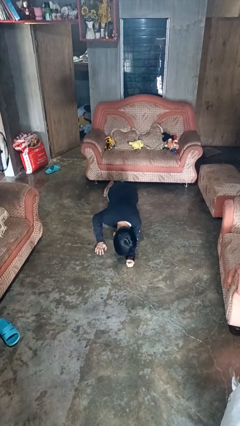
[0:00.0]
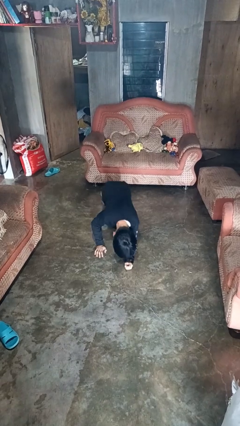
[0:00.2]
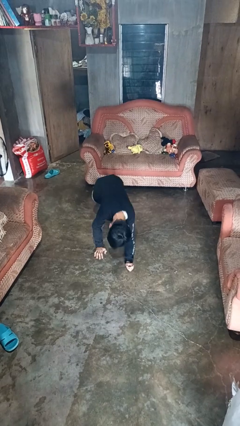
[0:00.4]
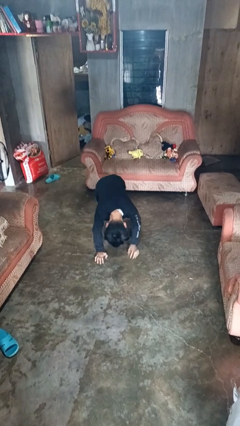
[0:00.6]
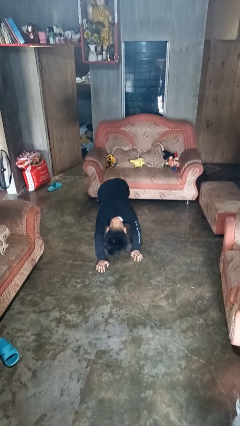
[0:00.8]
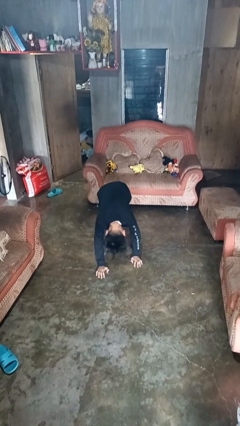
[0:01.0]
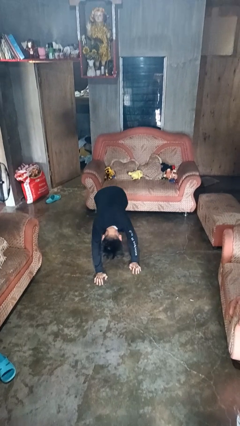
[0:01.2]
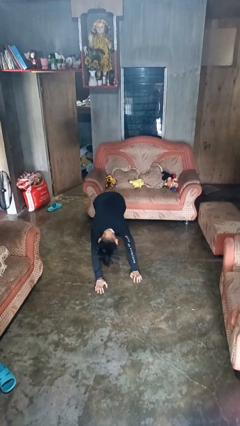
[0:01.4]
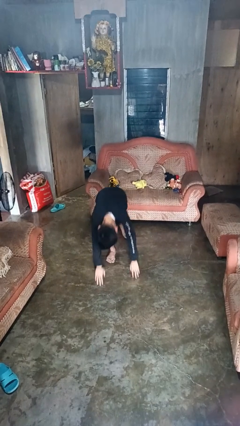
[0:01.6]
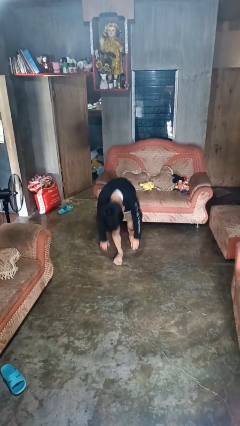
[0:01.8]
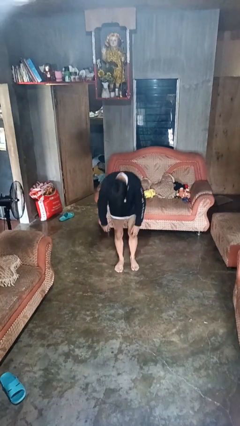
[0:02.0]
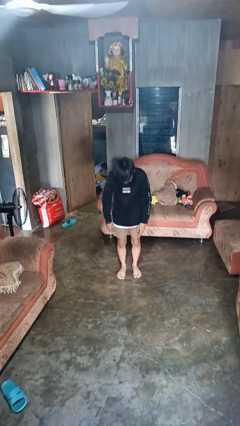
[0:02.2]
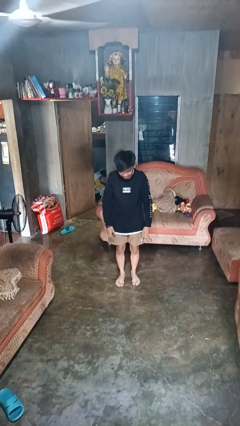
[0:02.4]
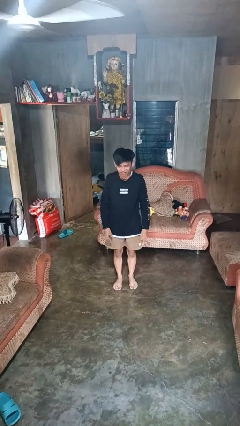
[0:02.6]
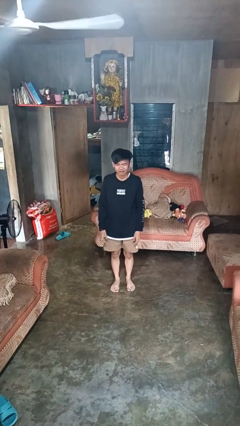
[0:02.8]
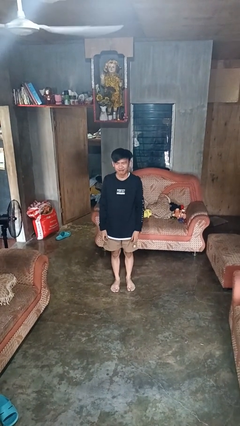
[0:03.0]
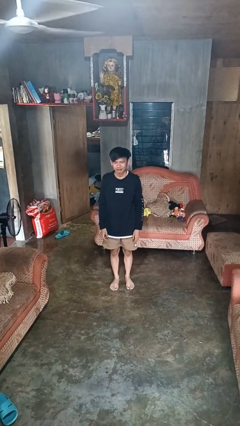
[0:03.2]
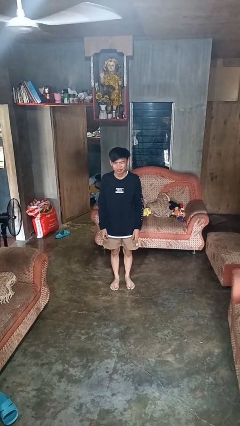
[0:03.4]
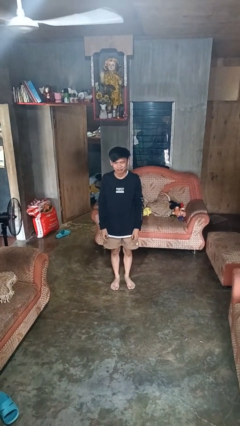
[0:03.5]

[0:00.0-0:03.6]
person stands up from floor

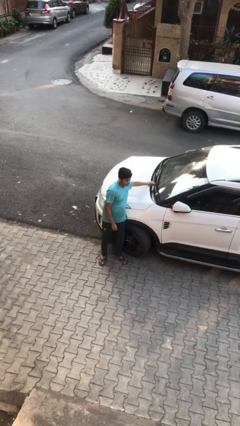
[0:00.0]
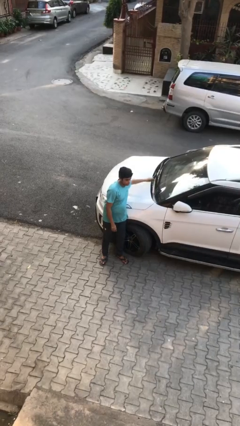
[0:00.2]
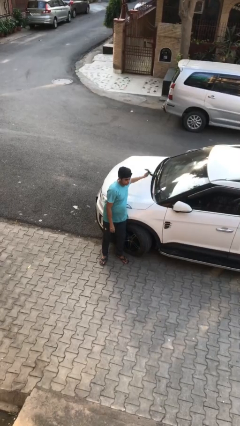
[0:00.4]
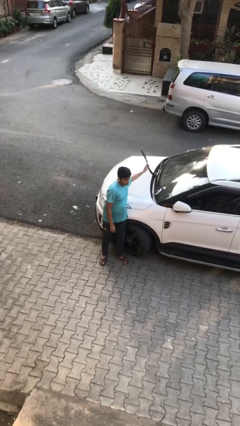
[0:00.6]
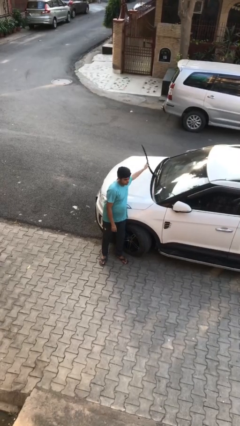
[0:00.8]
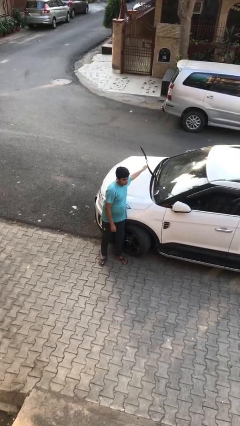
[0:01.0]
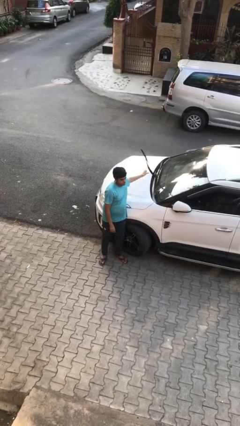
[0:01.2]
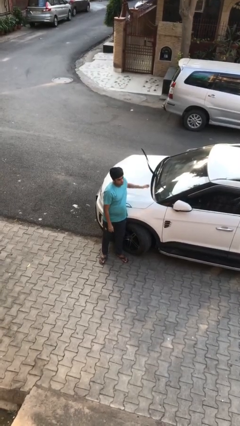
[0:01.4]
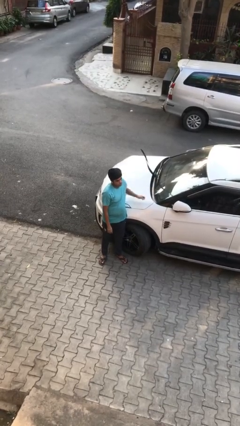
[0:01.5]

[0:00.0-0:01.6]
person flips up car wipers

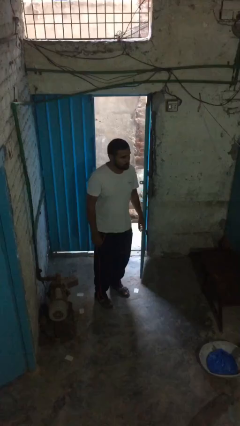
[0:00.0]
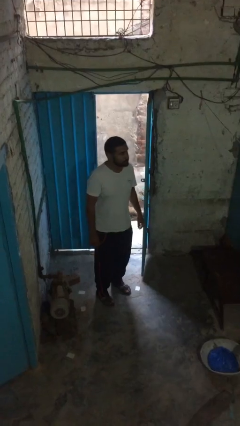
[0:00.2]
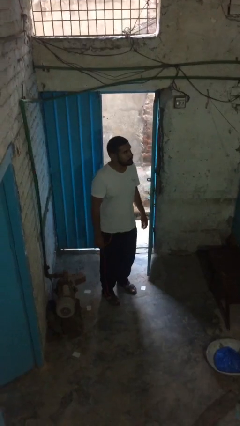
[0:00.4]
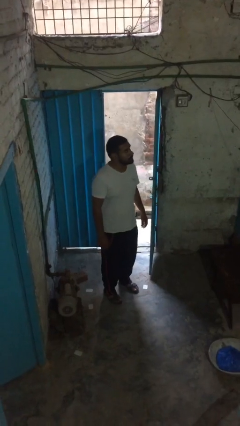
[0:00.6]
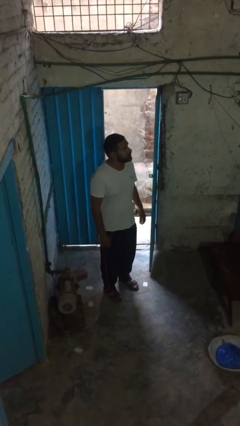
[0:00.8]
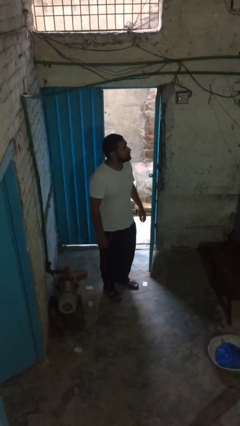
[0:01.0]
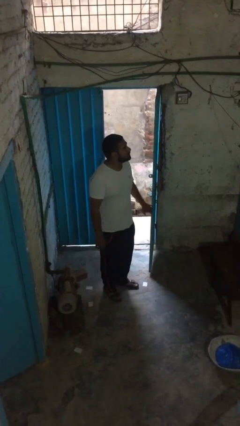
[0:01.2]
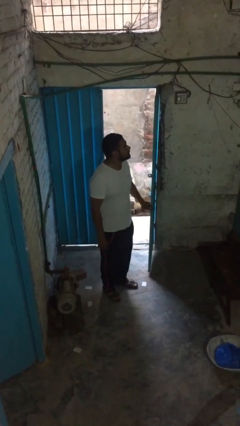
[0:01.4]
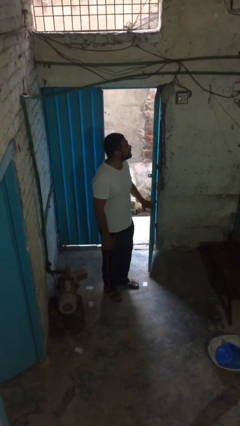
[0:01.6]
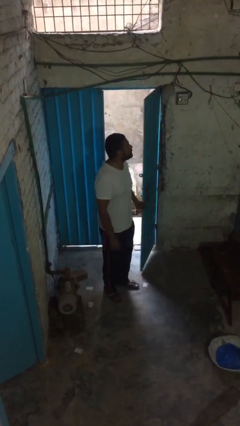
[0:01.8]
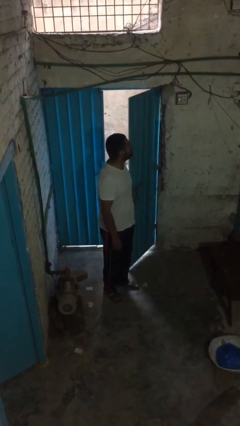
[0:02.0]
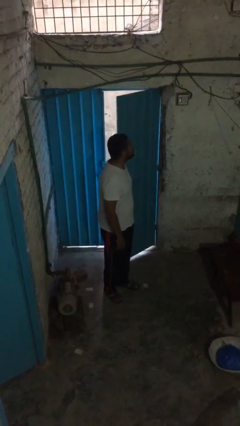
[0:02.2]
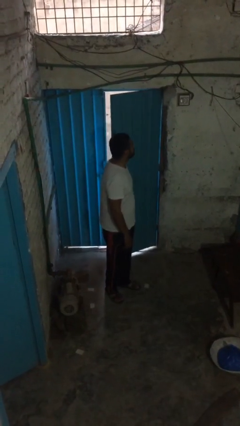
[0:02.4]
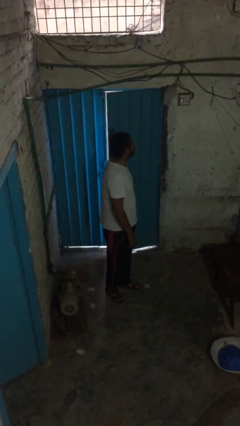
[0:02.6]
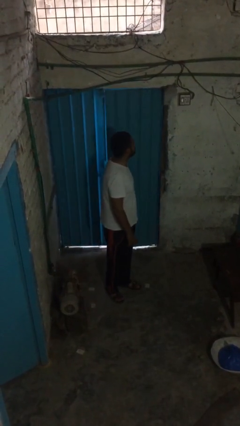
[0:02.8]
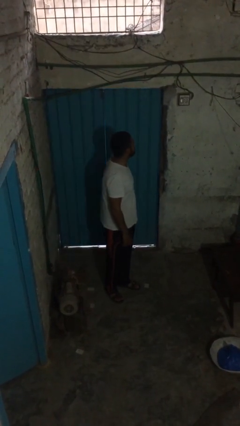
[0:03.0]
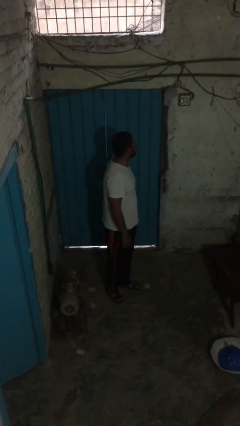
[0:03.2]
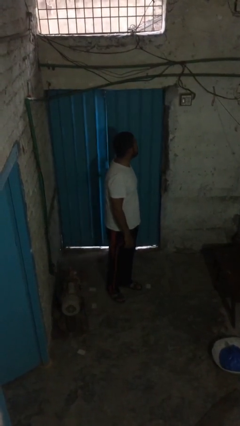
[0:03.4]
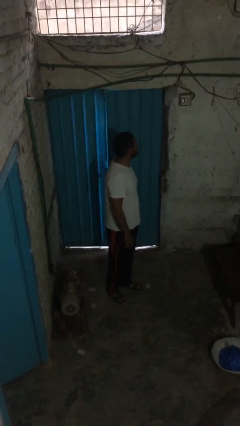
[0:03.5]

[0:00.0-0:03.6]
person closes facility door

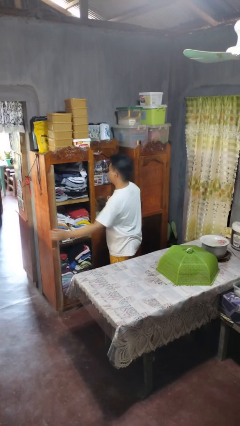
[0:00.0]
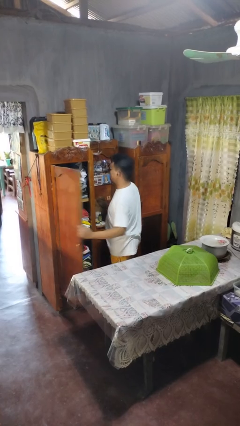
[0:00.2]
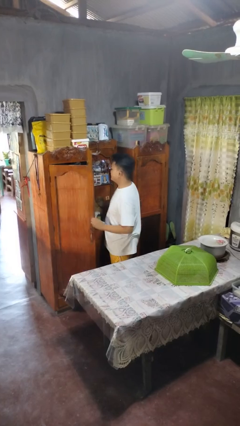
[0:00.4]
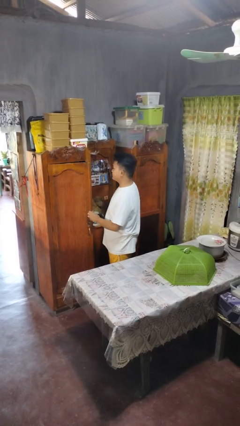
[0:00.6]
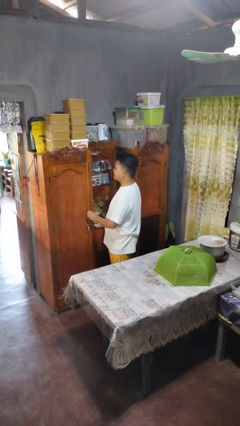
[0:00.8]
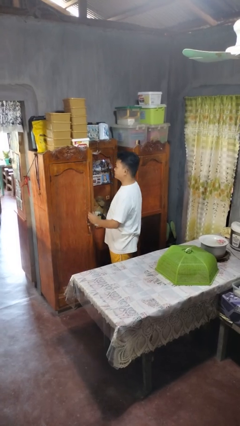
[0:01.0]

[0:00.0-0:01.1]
person closes closet door

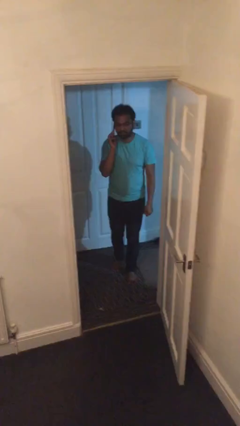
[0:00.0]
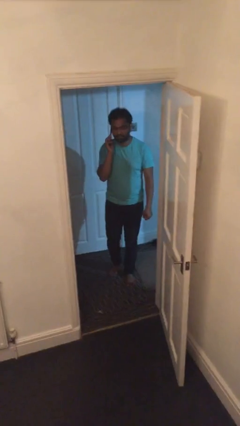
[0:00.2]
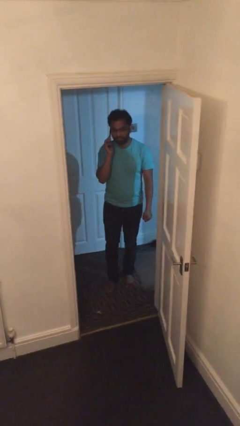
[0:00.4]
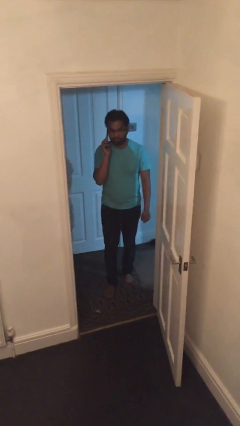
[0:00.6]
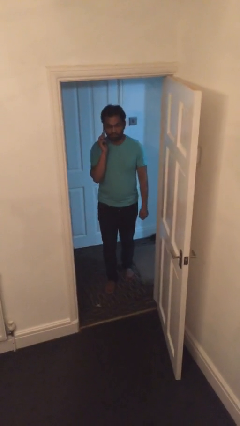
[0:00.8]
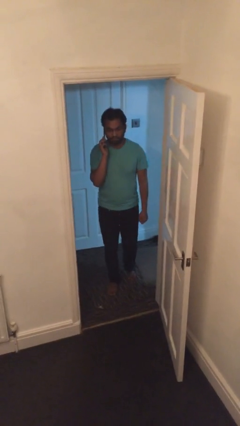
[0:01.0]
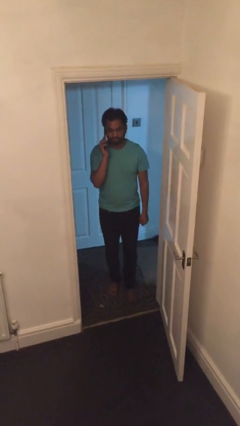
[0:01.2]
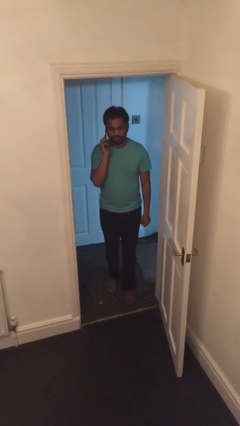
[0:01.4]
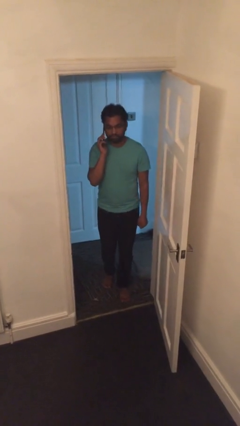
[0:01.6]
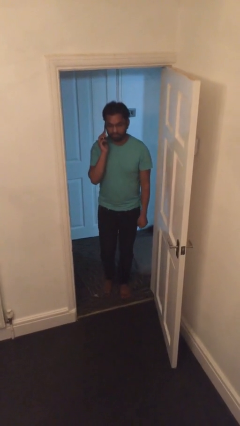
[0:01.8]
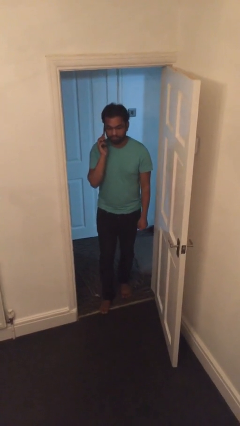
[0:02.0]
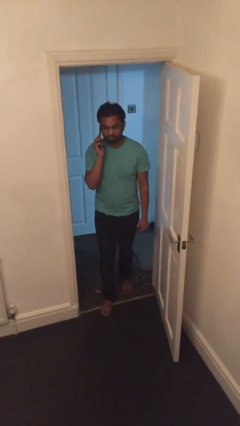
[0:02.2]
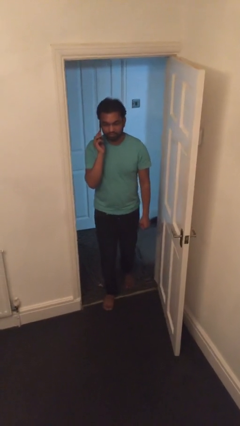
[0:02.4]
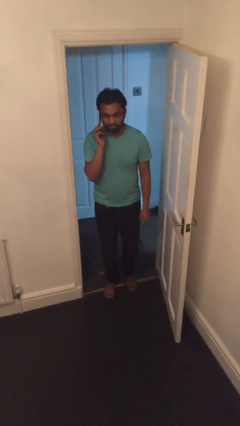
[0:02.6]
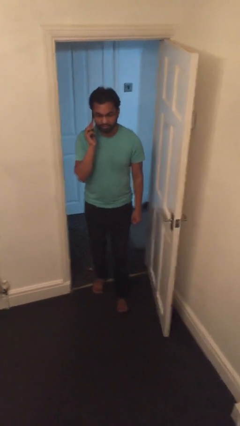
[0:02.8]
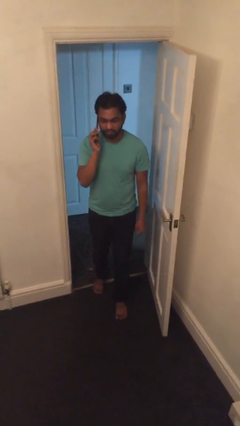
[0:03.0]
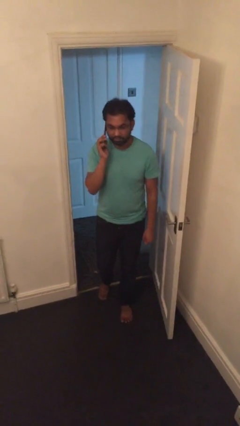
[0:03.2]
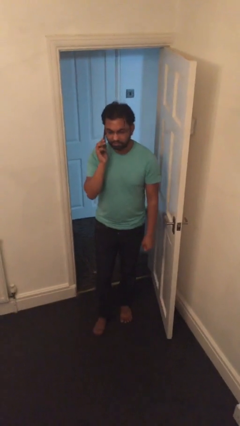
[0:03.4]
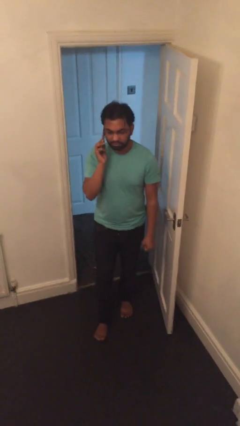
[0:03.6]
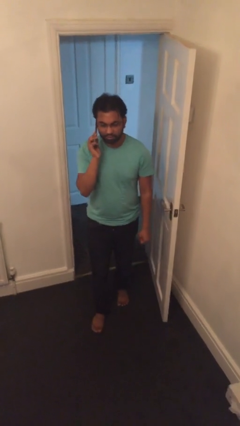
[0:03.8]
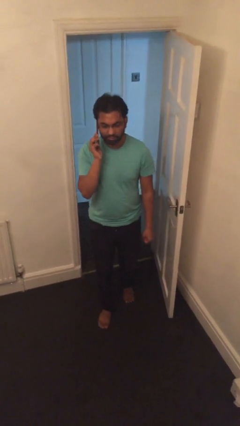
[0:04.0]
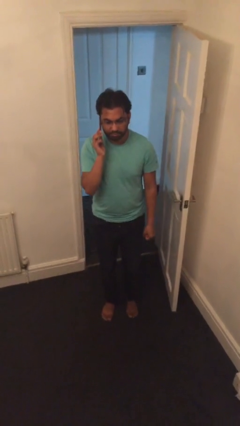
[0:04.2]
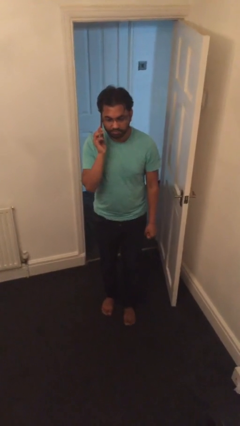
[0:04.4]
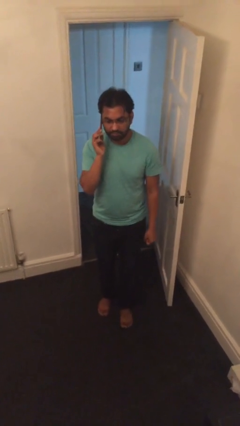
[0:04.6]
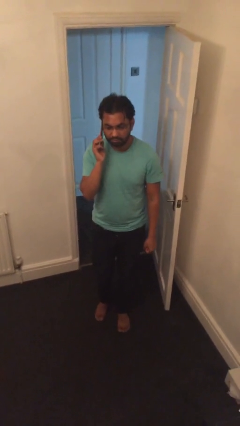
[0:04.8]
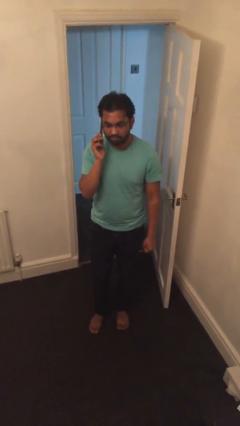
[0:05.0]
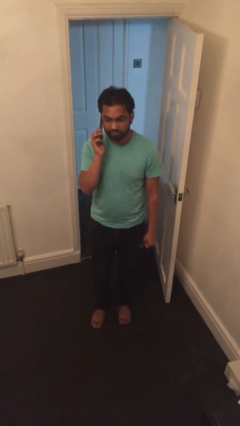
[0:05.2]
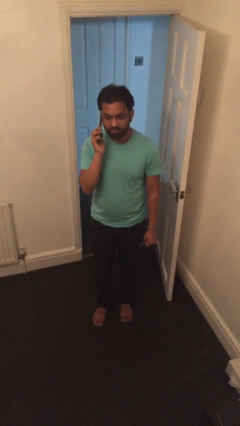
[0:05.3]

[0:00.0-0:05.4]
person enters scene through structure

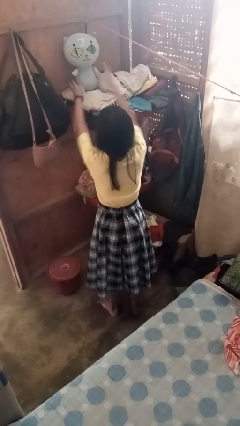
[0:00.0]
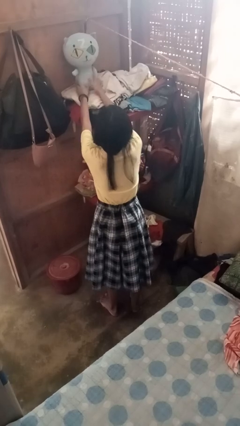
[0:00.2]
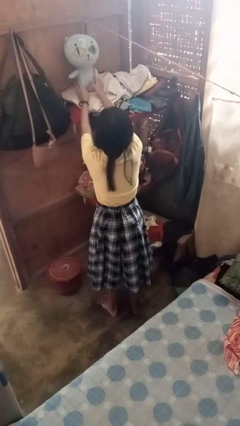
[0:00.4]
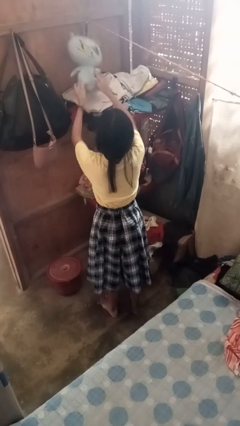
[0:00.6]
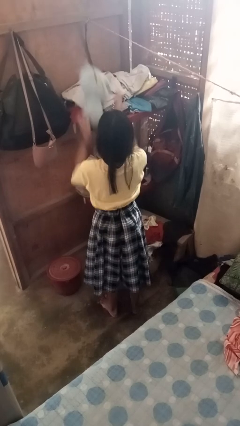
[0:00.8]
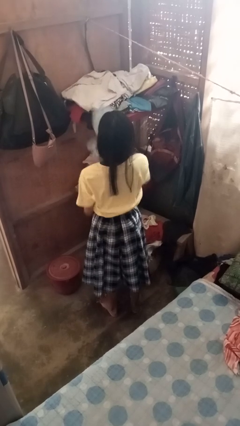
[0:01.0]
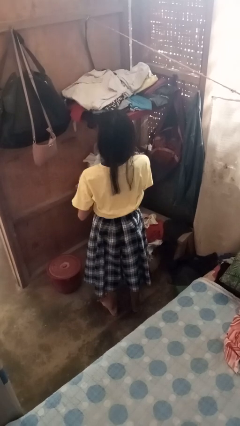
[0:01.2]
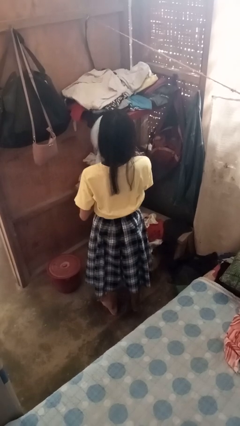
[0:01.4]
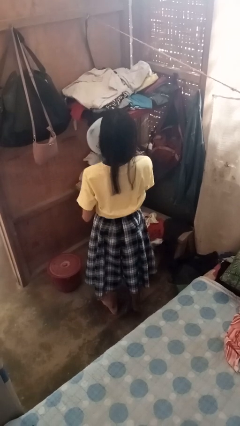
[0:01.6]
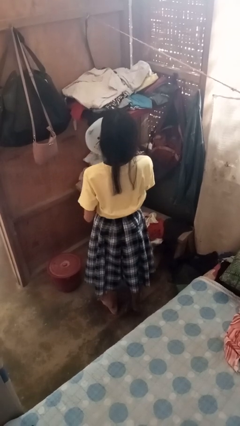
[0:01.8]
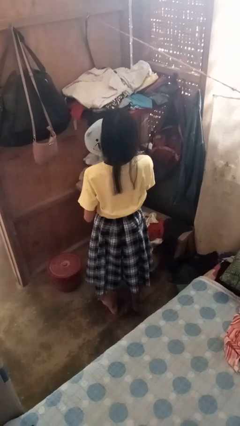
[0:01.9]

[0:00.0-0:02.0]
person picks up object from shelf

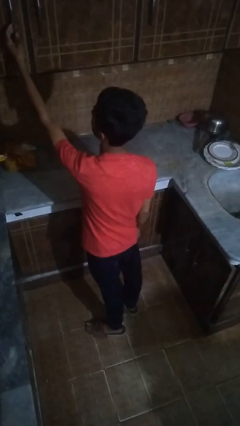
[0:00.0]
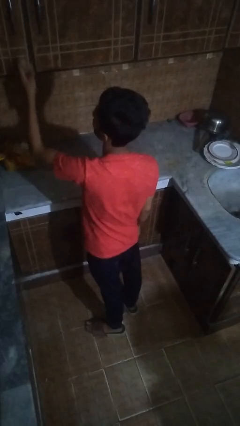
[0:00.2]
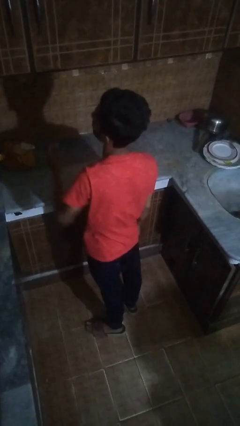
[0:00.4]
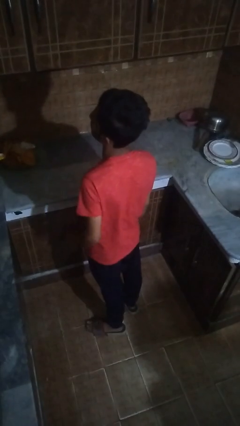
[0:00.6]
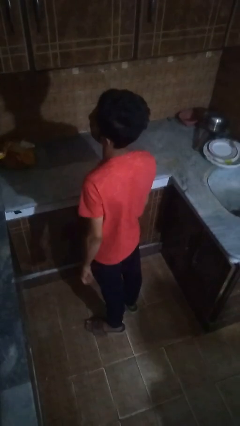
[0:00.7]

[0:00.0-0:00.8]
person opens cabinet
